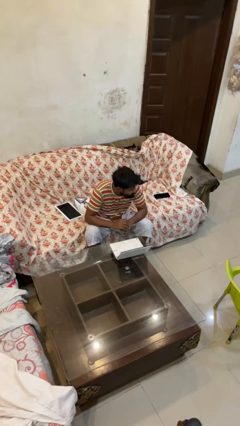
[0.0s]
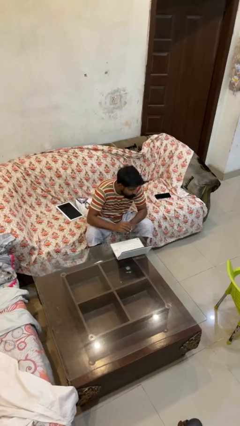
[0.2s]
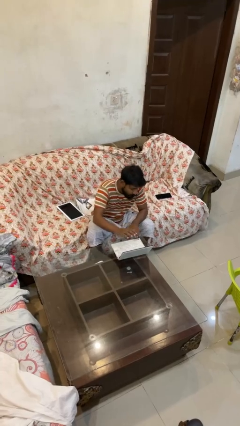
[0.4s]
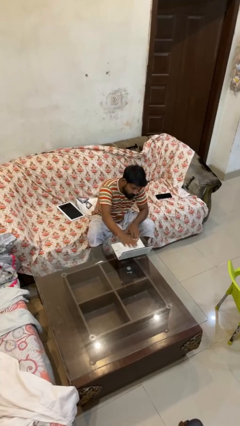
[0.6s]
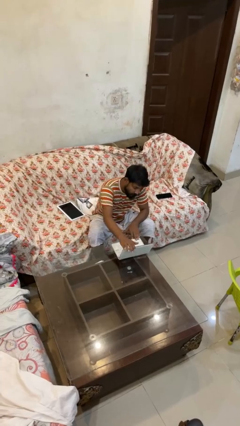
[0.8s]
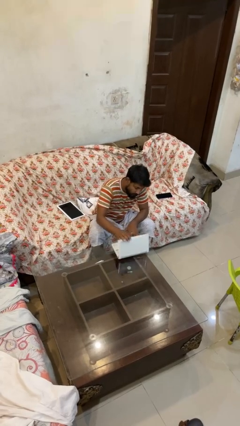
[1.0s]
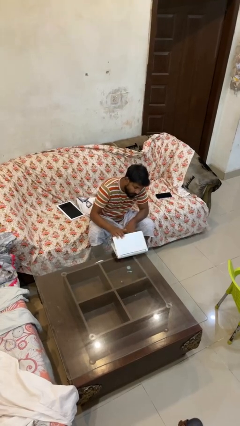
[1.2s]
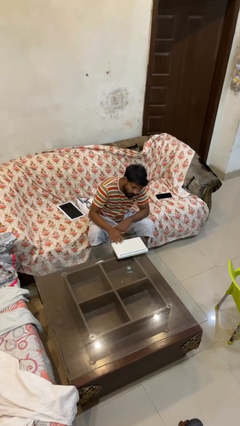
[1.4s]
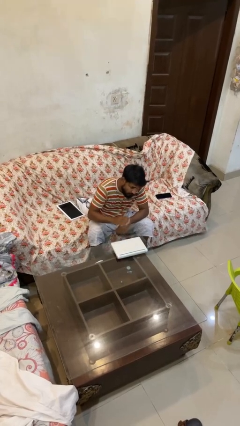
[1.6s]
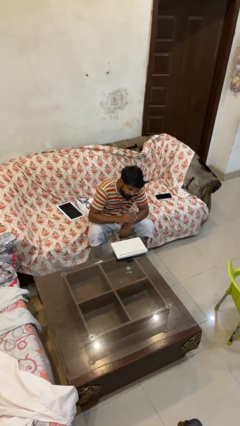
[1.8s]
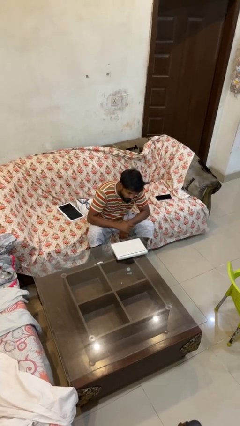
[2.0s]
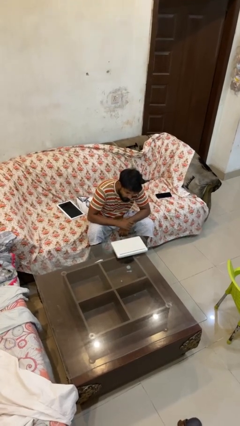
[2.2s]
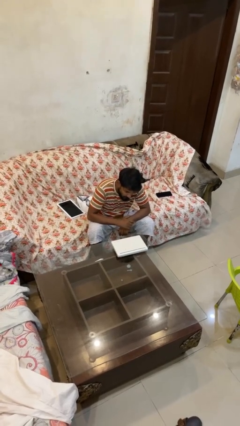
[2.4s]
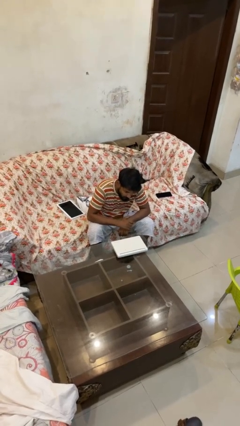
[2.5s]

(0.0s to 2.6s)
person closes laptop

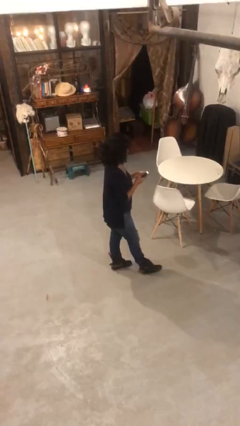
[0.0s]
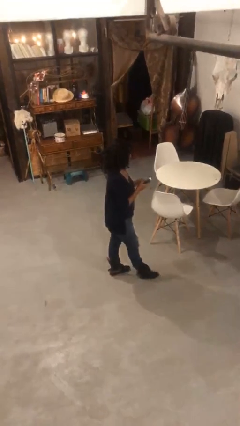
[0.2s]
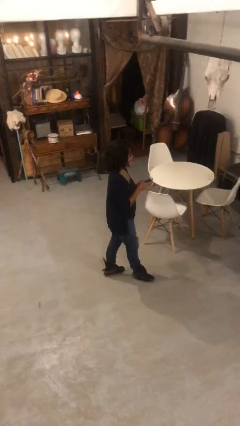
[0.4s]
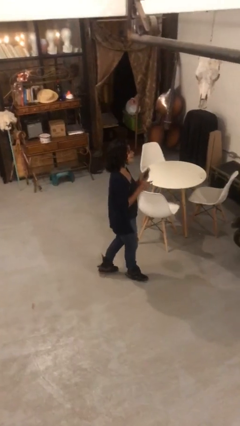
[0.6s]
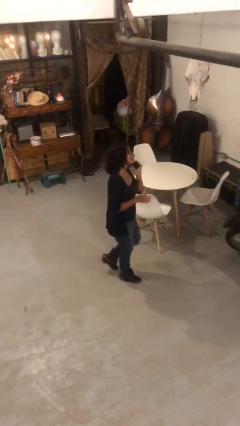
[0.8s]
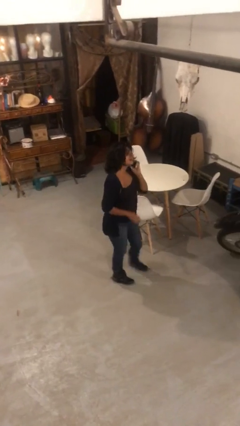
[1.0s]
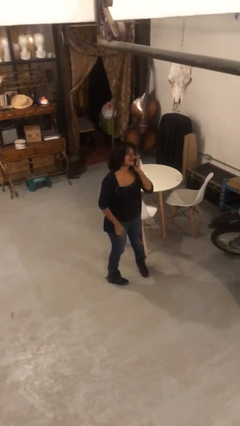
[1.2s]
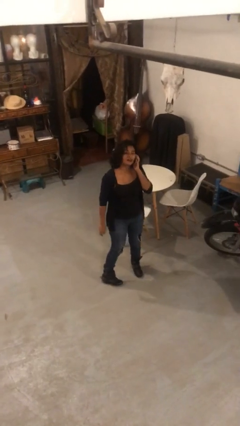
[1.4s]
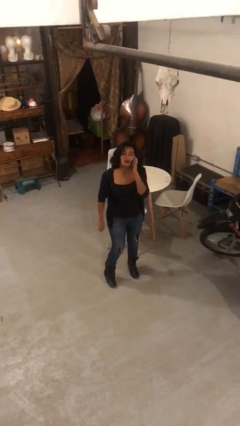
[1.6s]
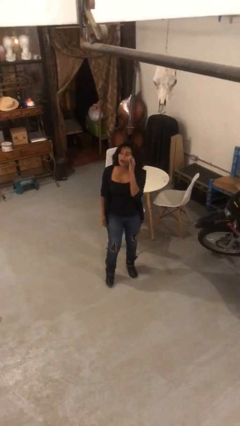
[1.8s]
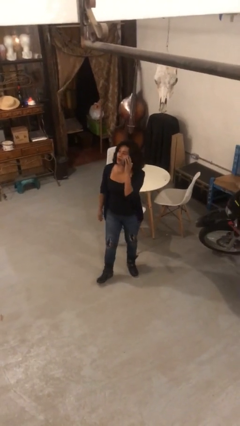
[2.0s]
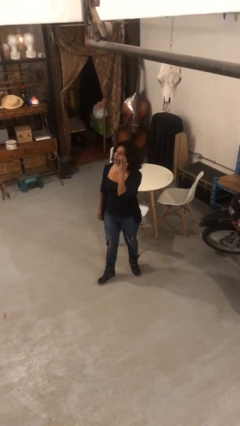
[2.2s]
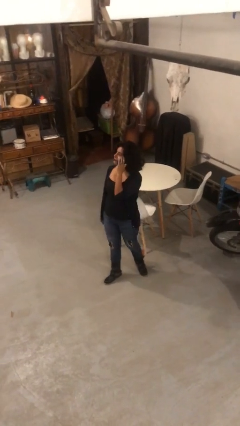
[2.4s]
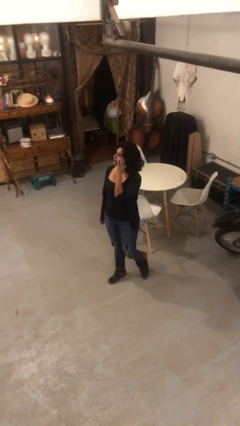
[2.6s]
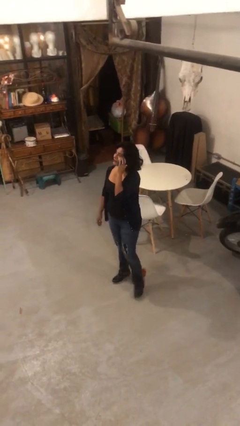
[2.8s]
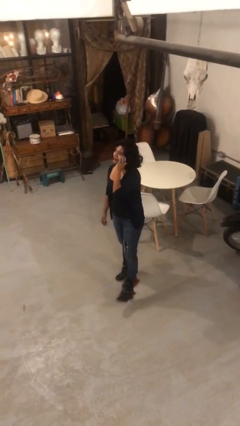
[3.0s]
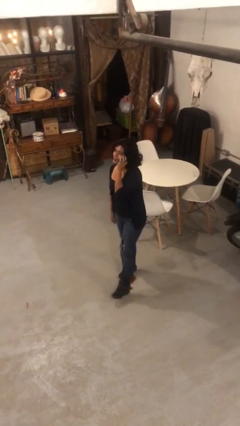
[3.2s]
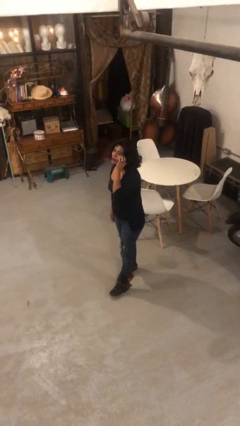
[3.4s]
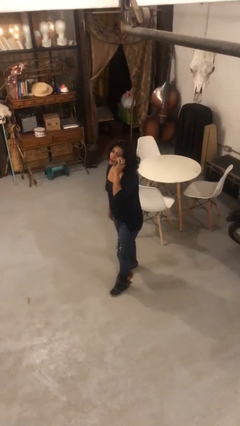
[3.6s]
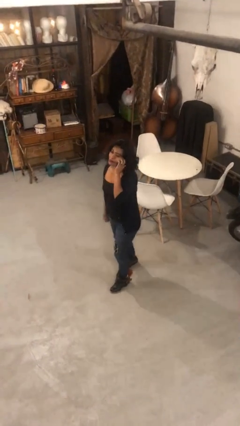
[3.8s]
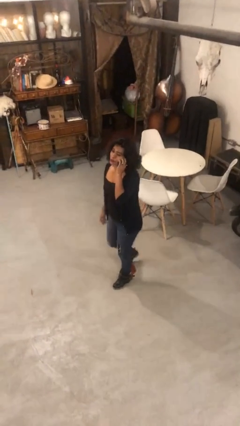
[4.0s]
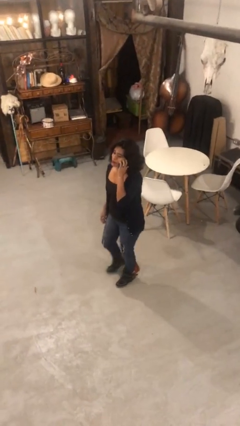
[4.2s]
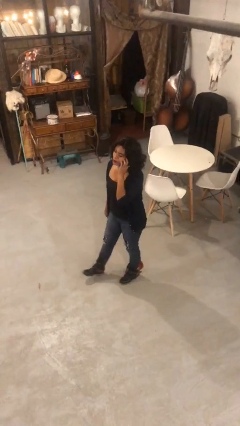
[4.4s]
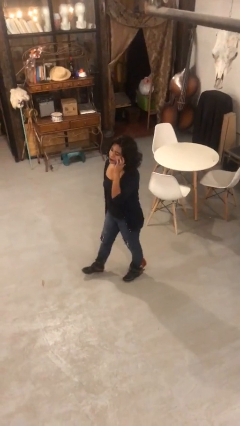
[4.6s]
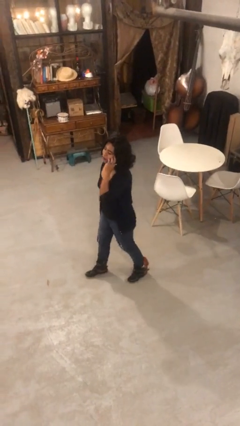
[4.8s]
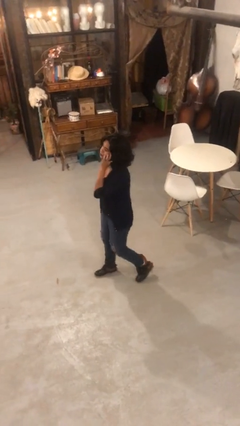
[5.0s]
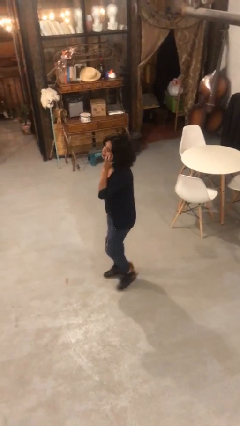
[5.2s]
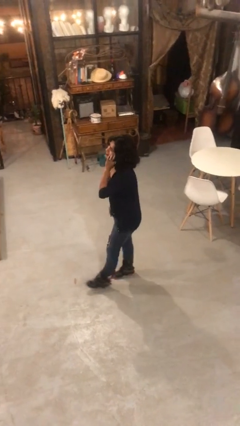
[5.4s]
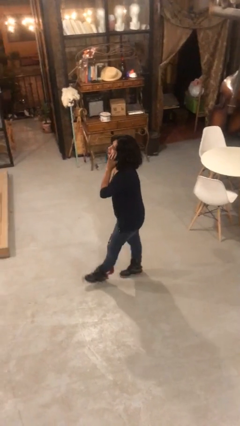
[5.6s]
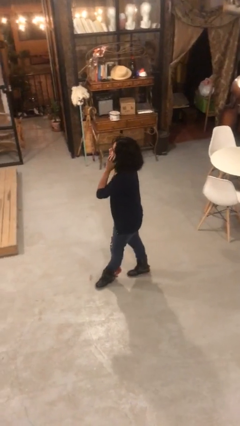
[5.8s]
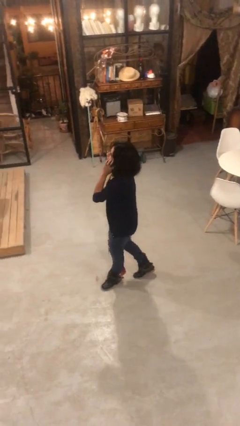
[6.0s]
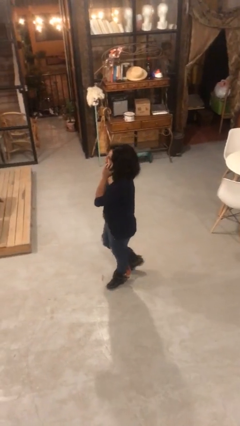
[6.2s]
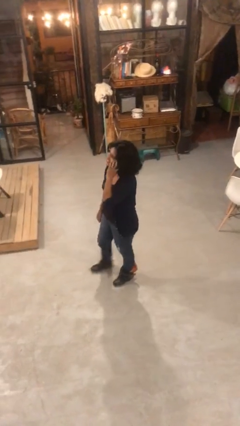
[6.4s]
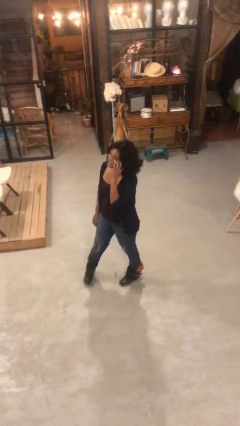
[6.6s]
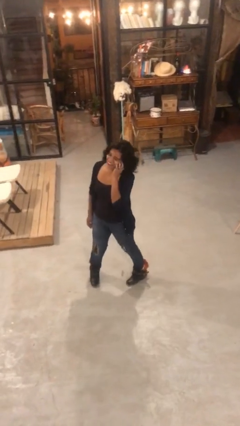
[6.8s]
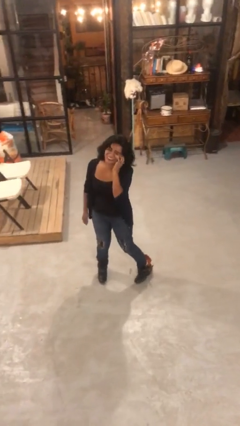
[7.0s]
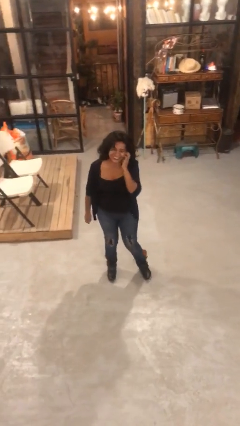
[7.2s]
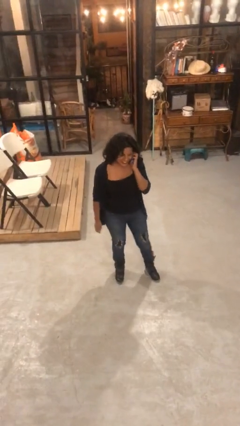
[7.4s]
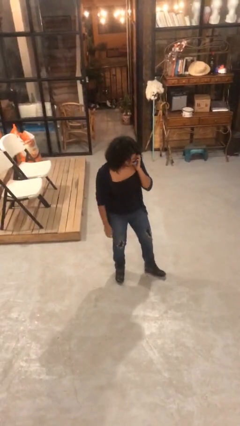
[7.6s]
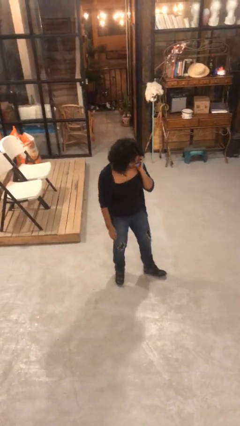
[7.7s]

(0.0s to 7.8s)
person talks on phone

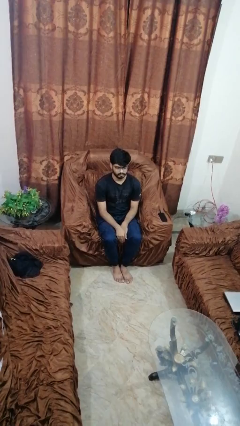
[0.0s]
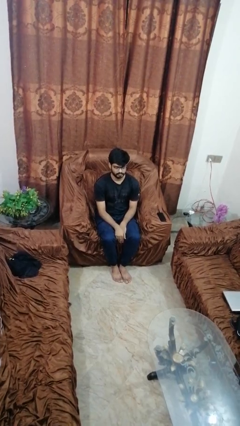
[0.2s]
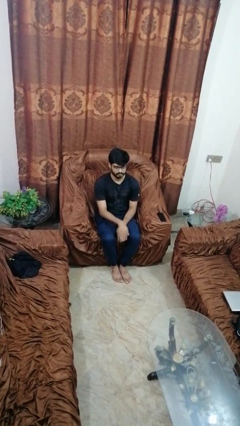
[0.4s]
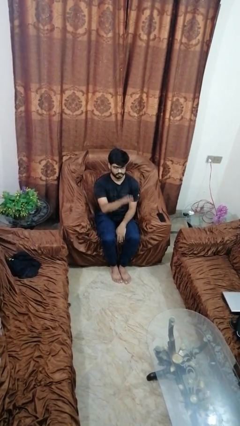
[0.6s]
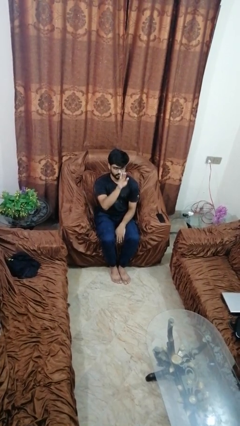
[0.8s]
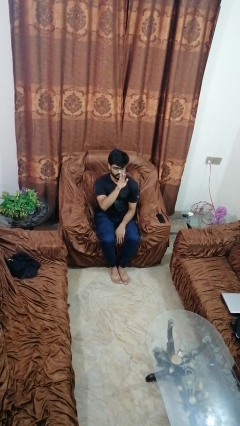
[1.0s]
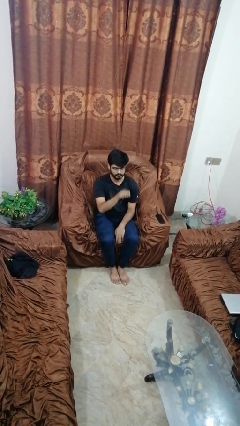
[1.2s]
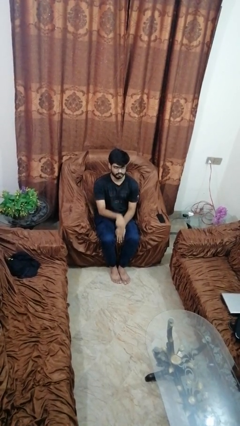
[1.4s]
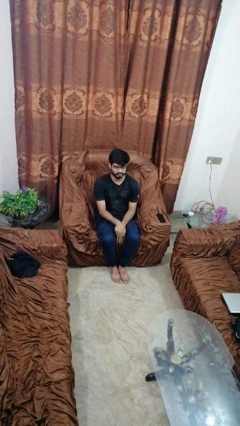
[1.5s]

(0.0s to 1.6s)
person gestures swipe up

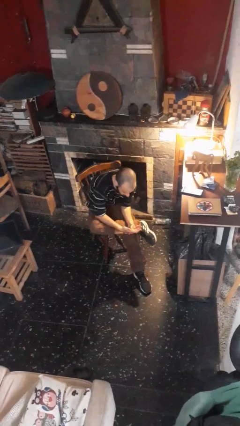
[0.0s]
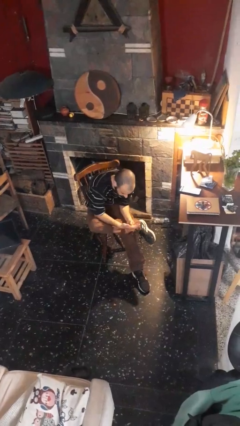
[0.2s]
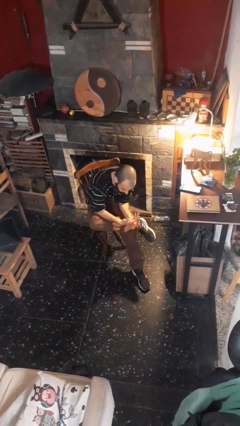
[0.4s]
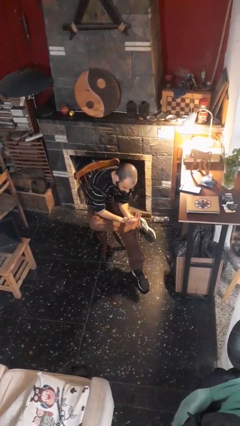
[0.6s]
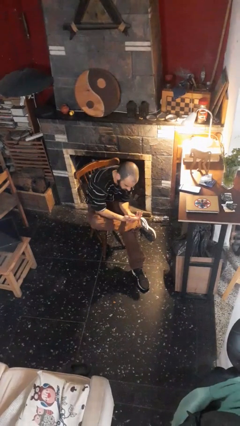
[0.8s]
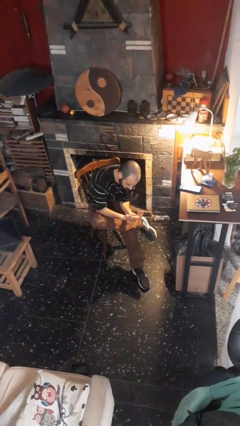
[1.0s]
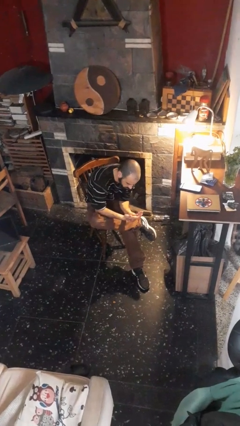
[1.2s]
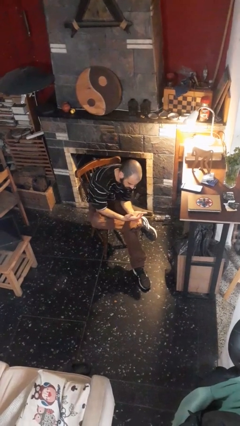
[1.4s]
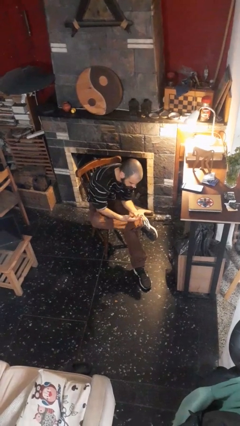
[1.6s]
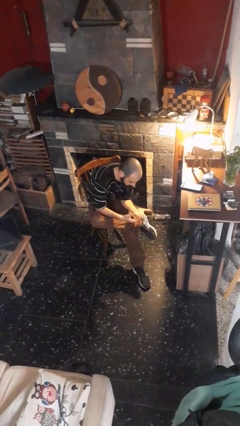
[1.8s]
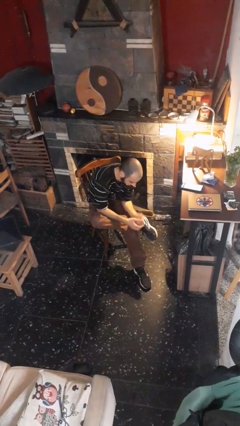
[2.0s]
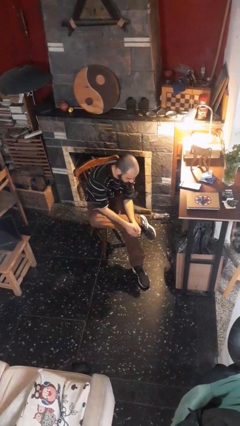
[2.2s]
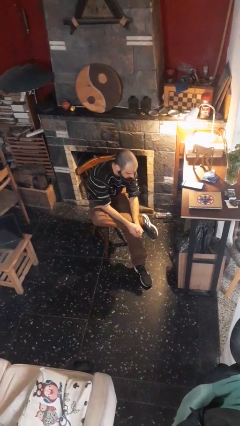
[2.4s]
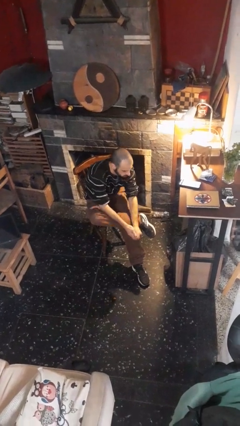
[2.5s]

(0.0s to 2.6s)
person looks at hands in lap

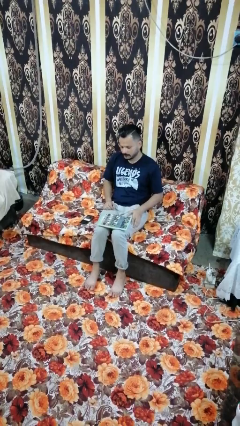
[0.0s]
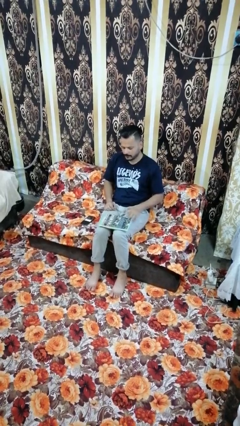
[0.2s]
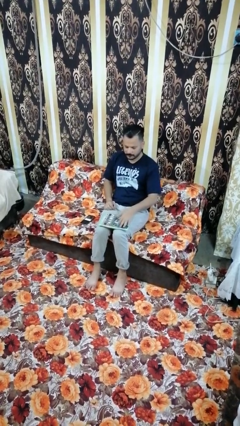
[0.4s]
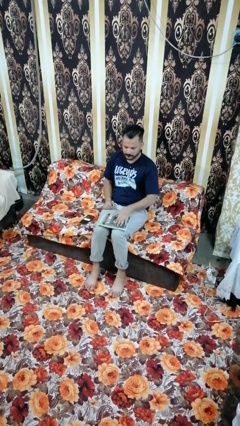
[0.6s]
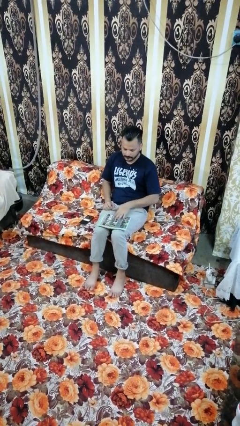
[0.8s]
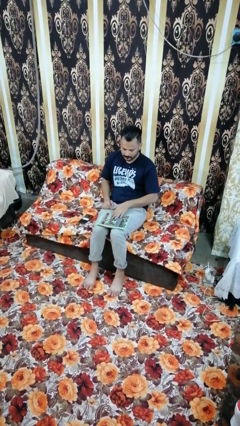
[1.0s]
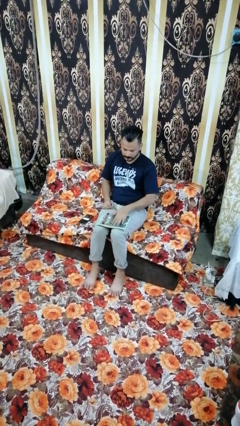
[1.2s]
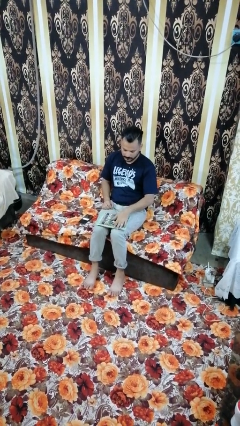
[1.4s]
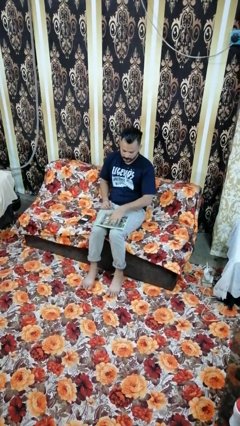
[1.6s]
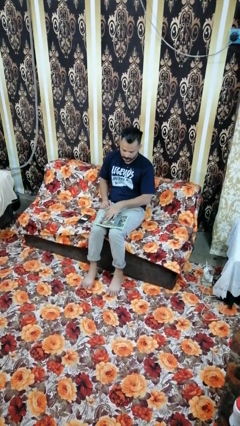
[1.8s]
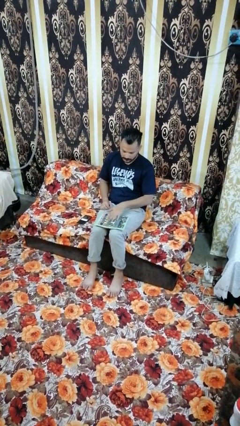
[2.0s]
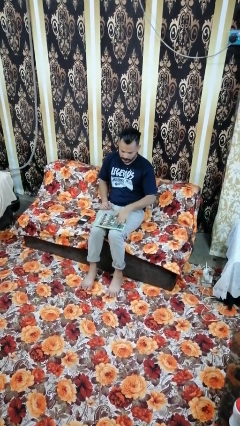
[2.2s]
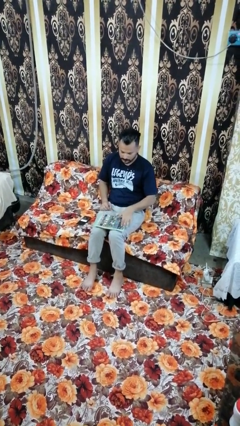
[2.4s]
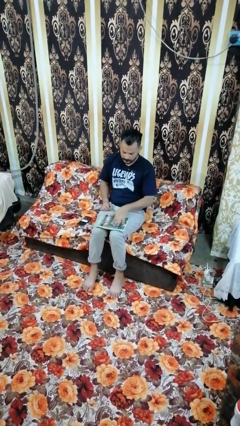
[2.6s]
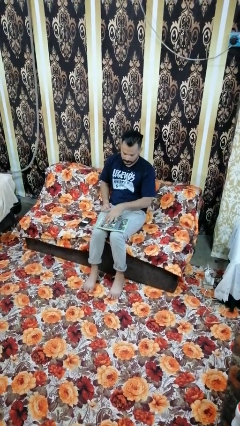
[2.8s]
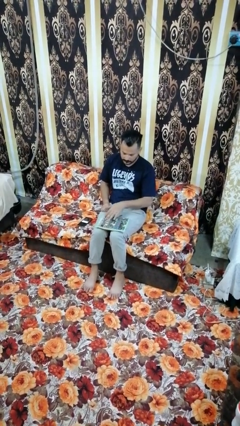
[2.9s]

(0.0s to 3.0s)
person waves hand over object
